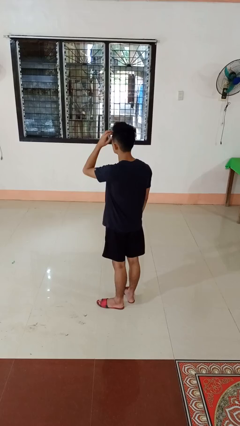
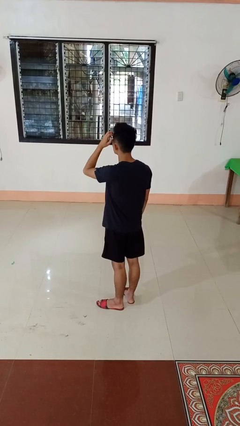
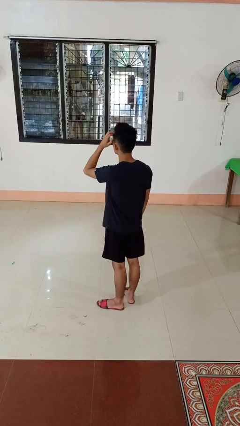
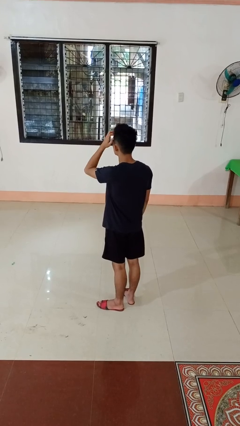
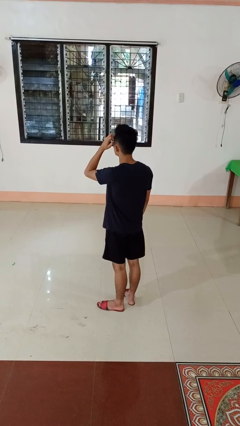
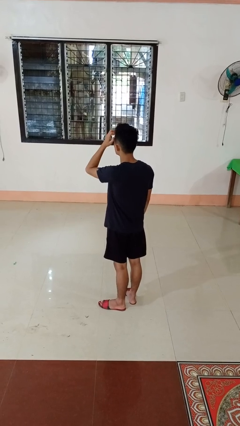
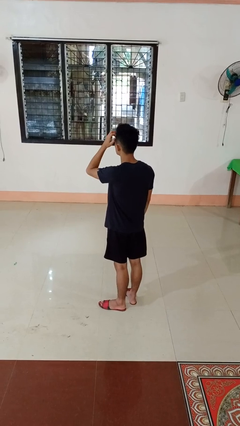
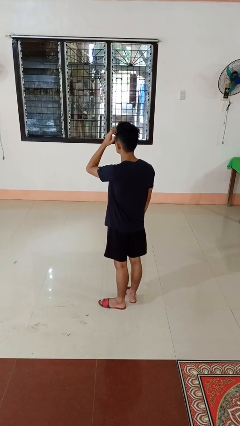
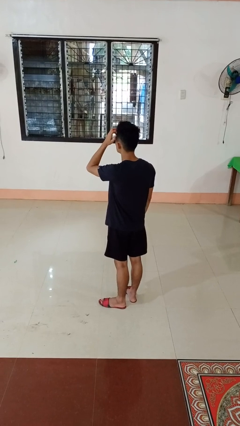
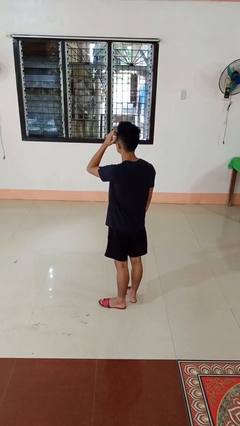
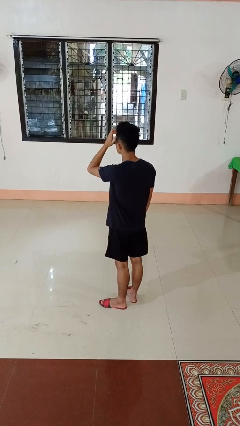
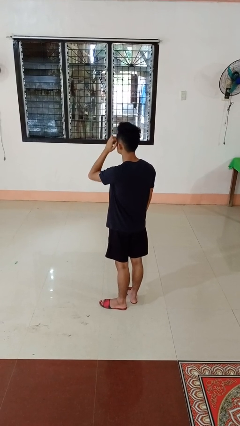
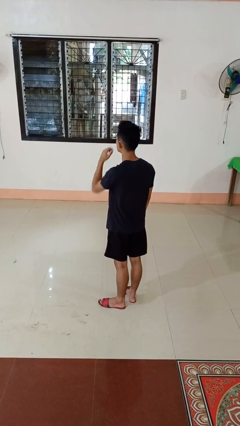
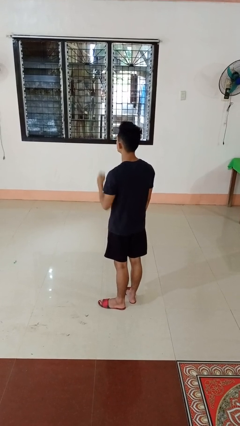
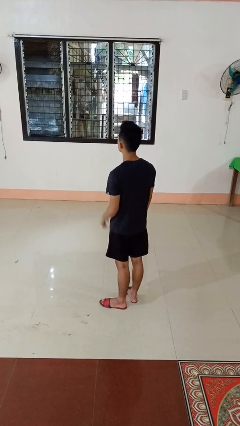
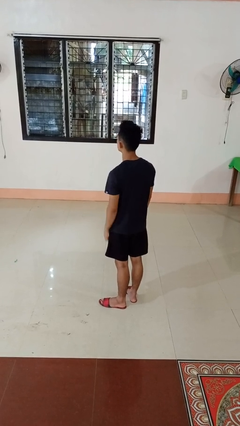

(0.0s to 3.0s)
person scratches face

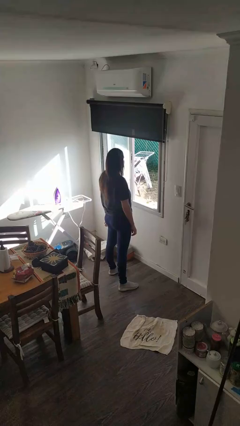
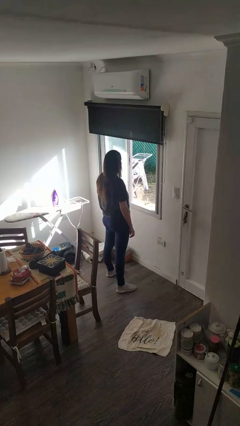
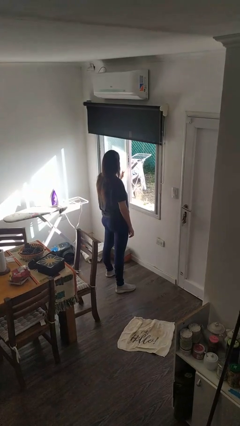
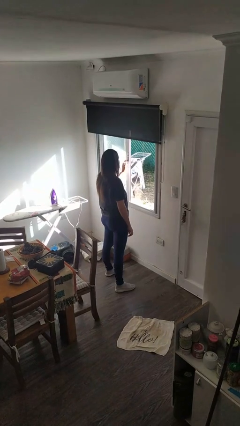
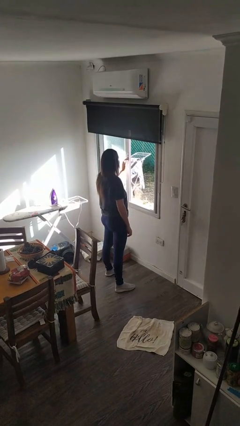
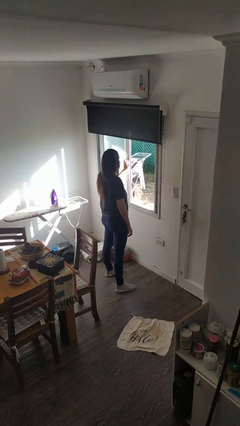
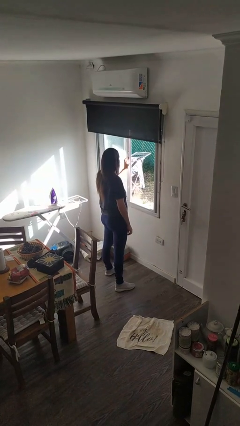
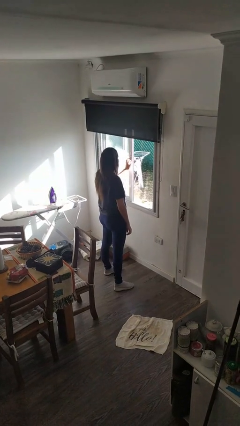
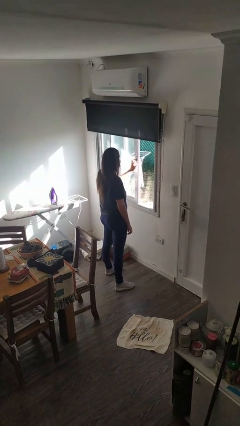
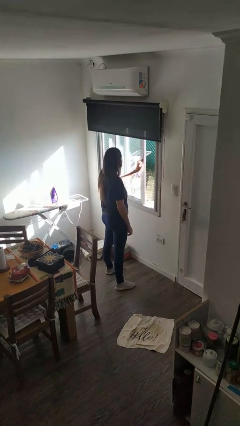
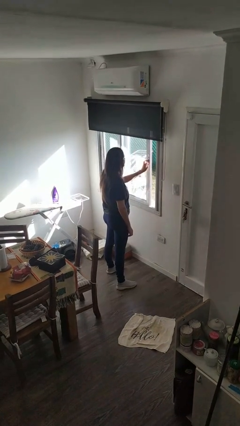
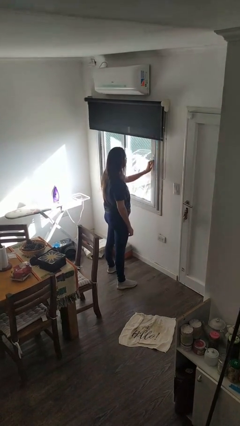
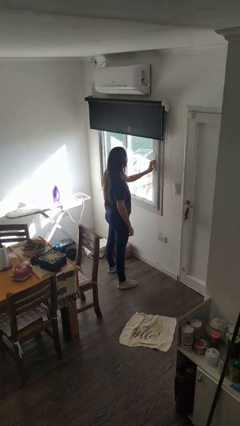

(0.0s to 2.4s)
person closes home window

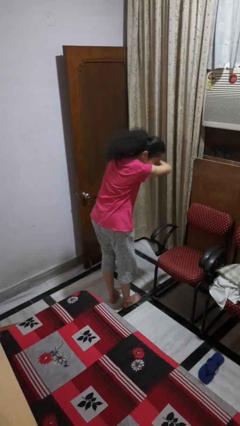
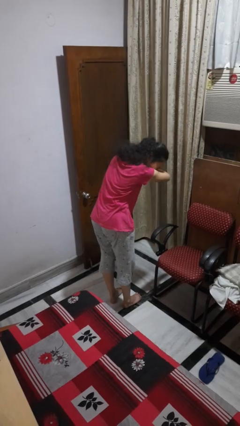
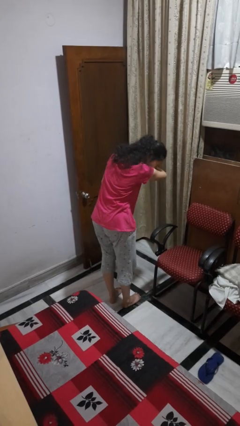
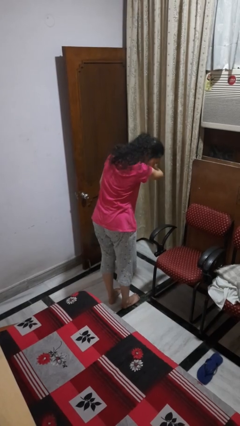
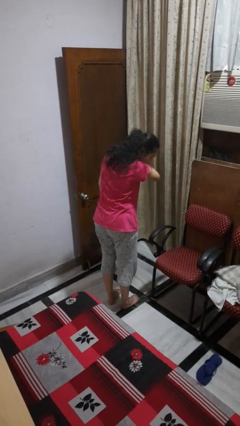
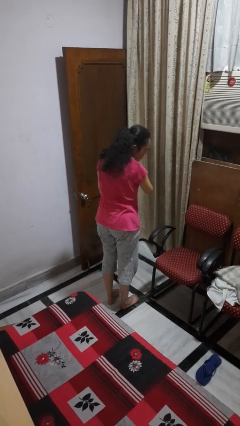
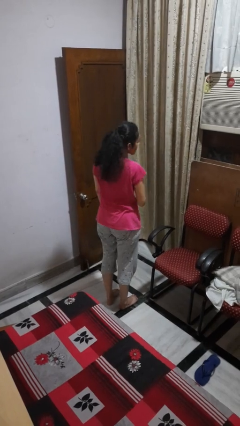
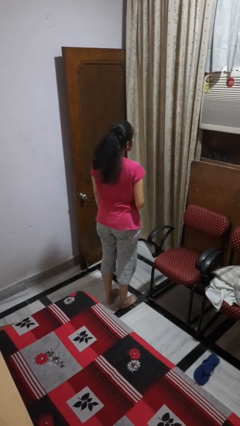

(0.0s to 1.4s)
person sneezes into arm

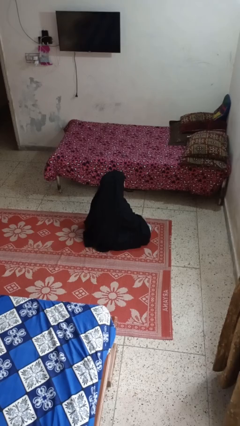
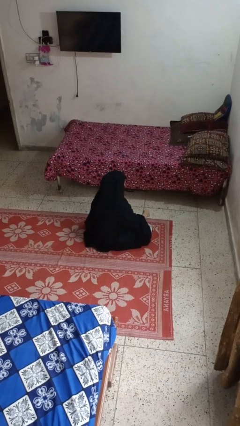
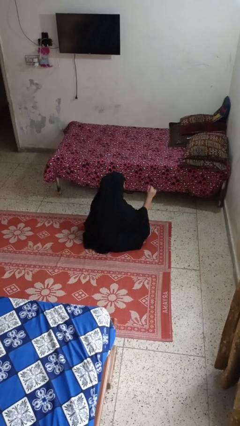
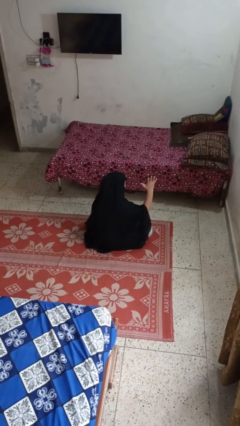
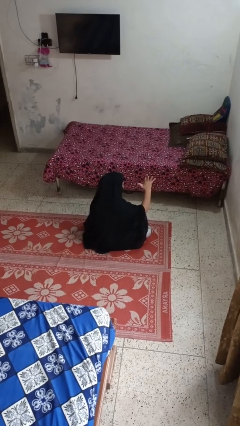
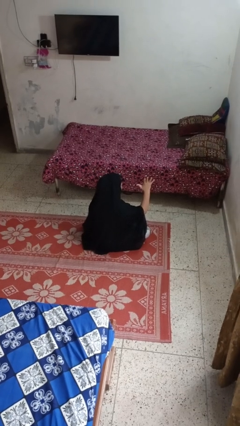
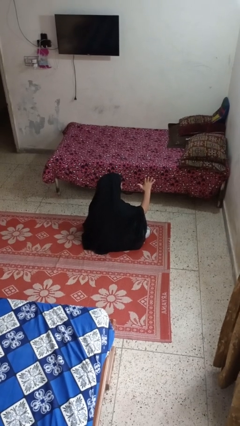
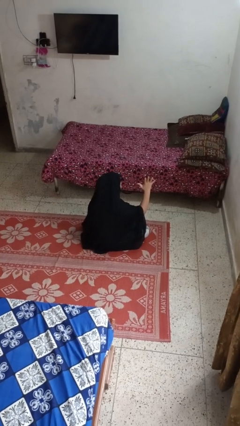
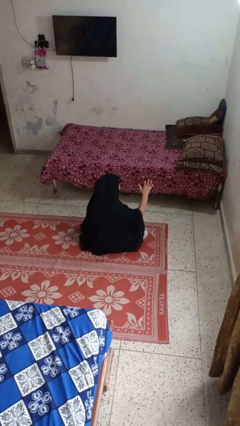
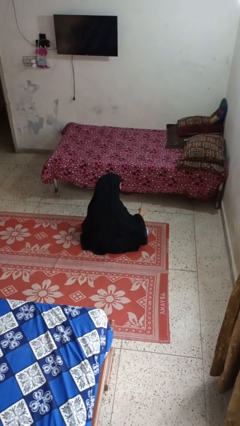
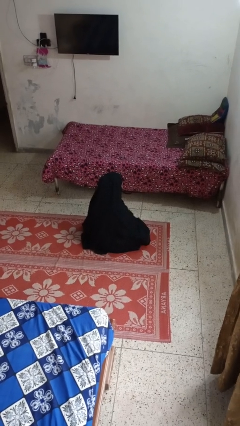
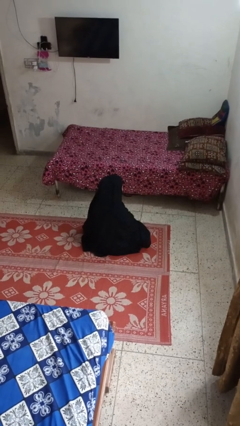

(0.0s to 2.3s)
person gestures number five

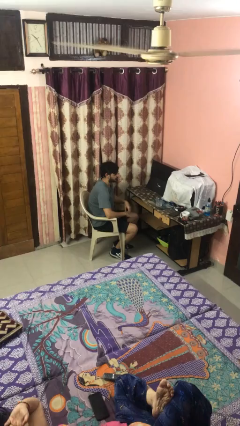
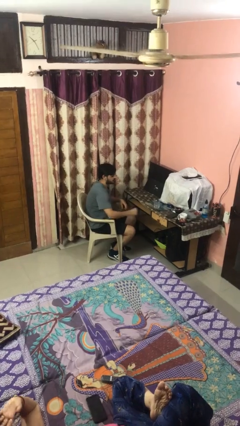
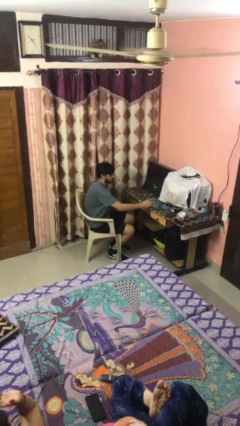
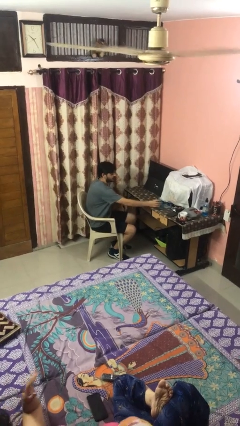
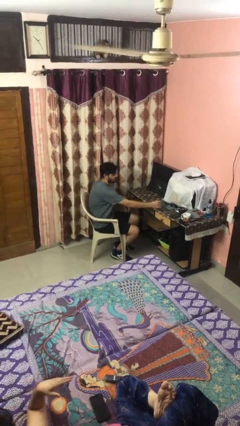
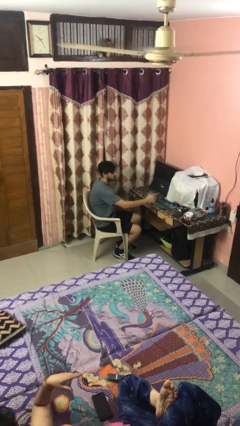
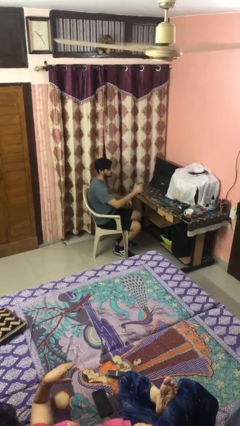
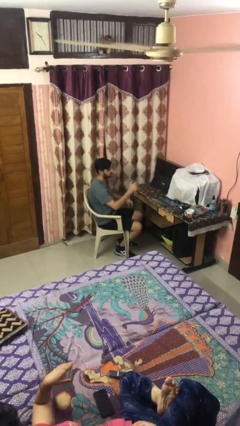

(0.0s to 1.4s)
person picks up object from table

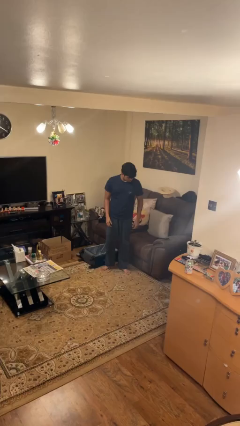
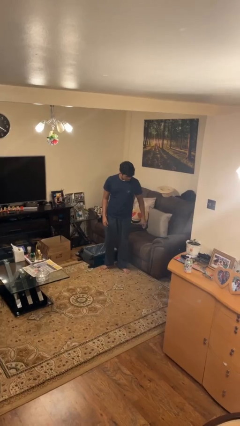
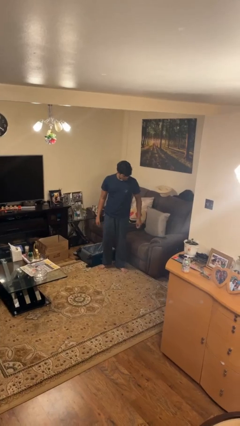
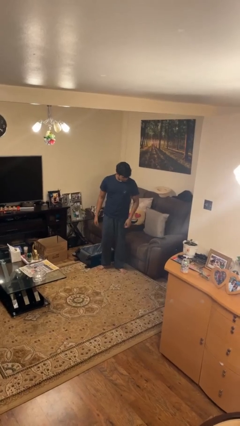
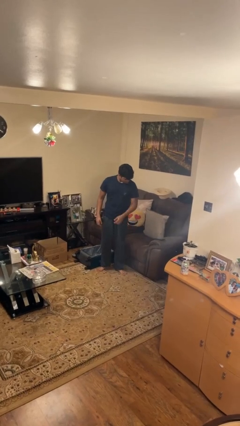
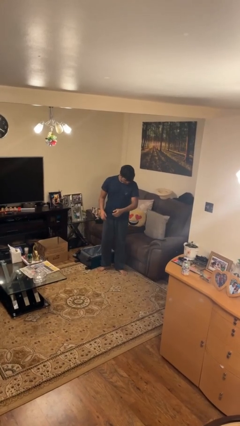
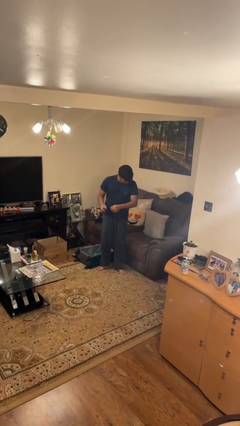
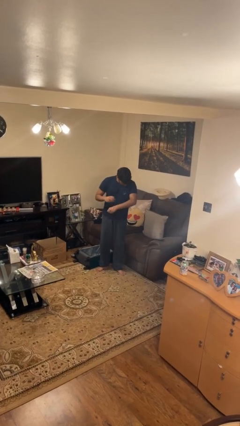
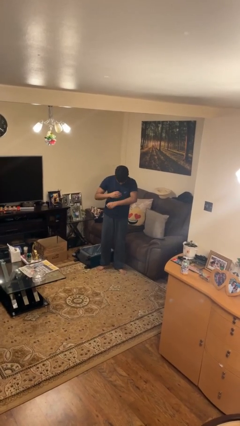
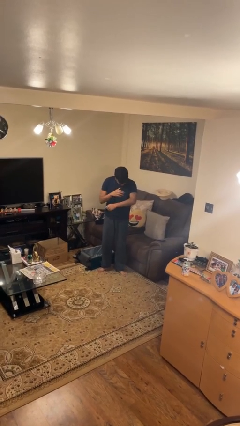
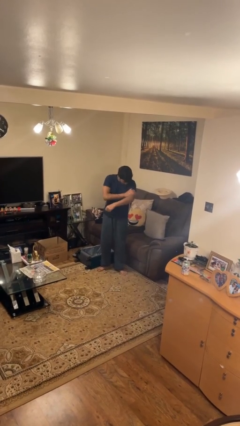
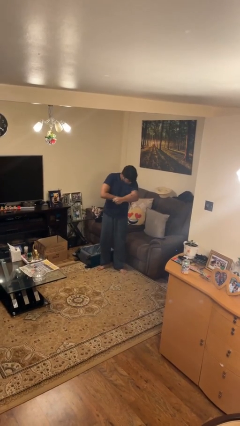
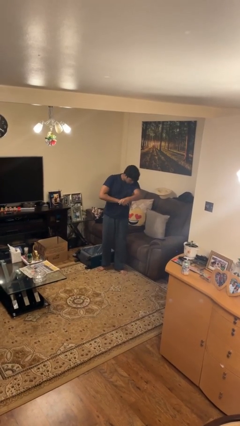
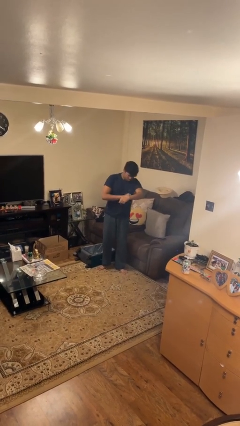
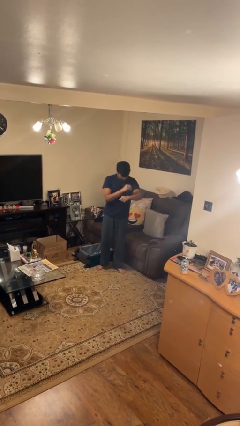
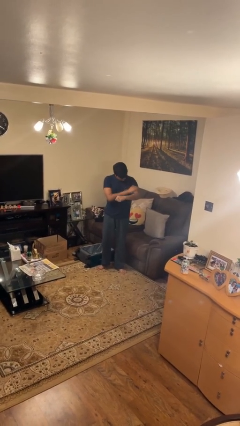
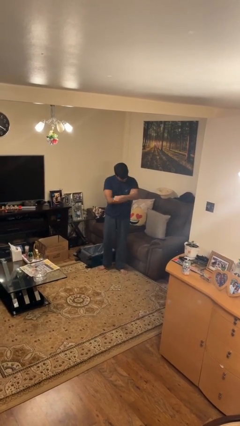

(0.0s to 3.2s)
person swats bug

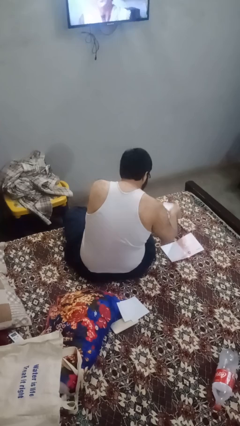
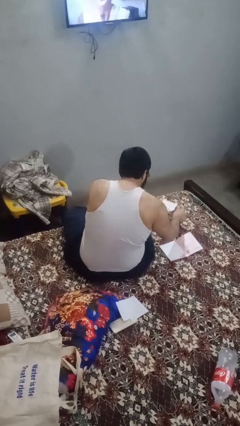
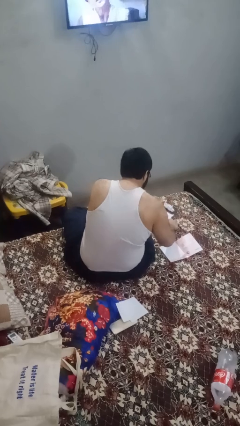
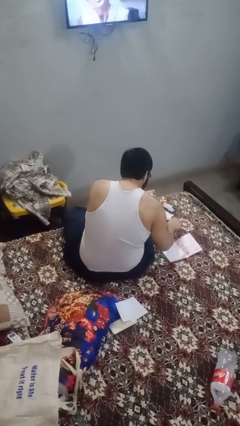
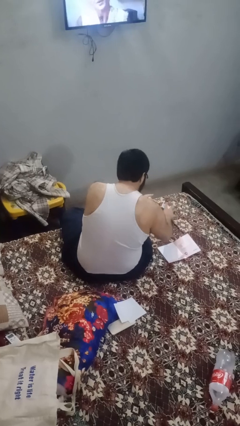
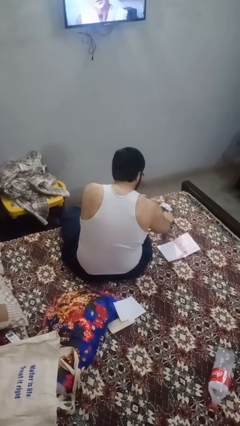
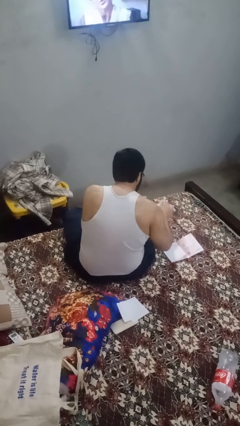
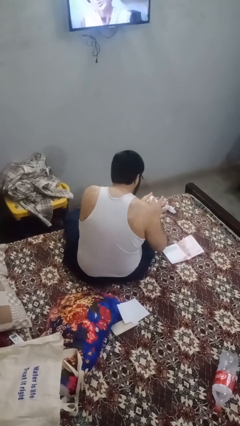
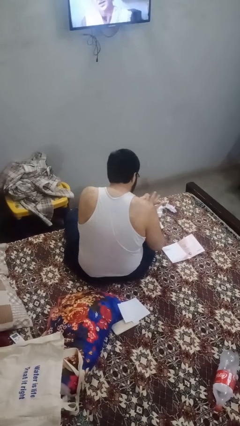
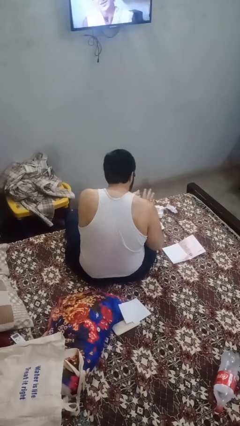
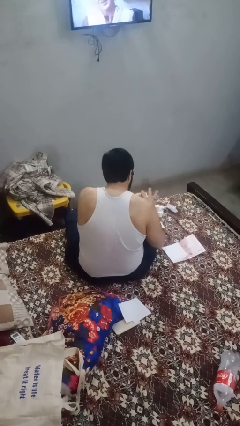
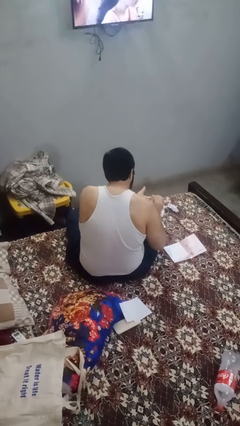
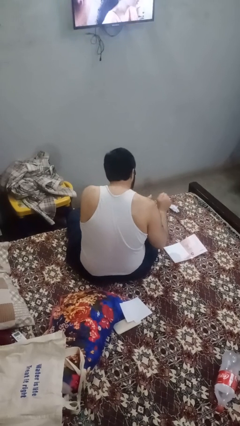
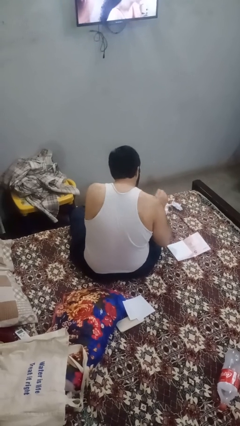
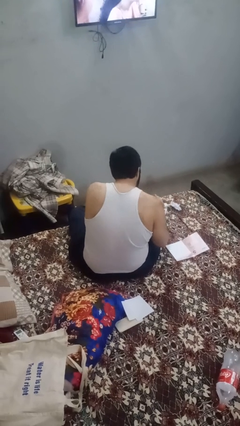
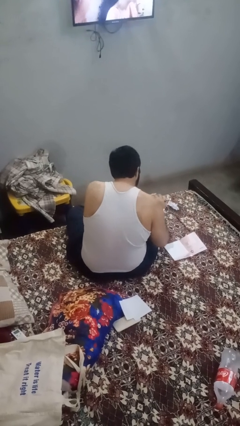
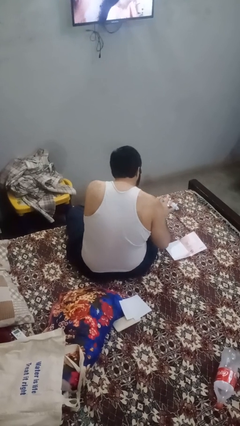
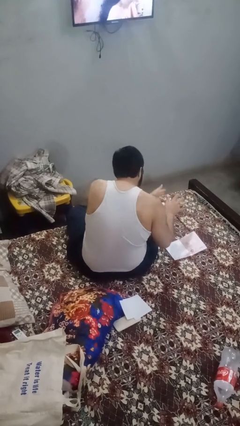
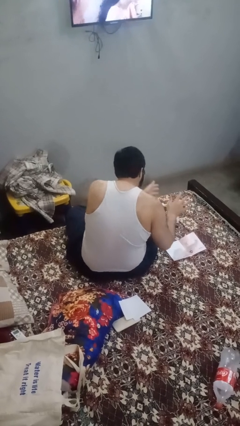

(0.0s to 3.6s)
person crumples paper
